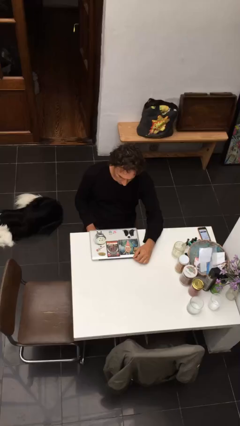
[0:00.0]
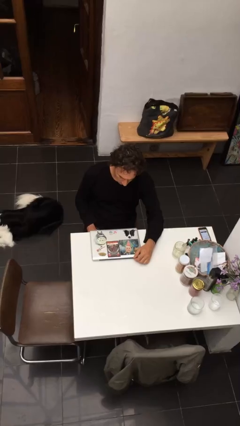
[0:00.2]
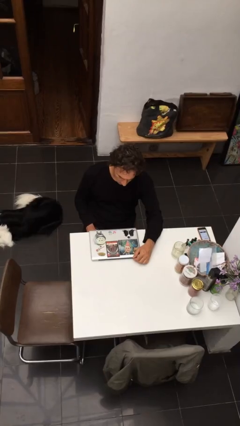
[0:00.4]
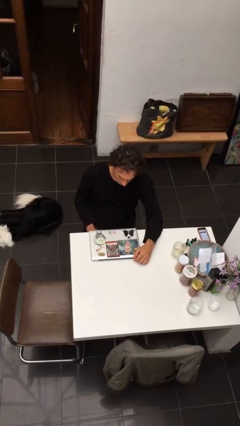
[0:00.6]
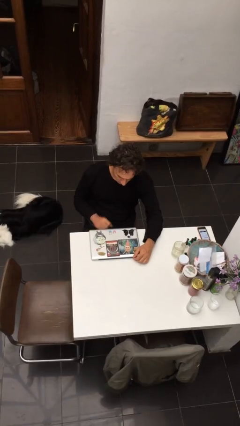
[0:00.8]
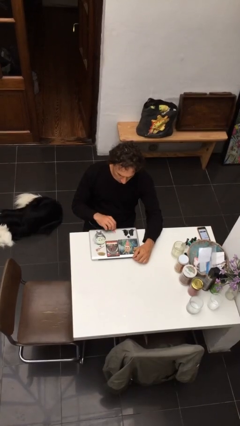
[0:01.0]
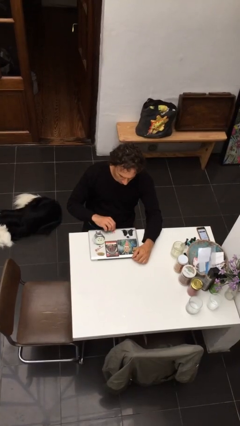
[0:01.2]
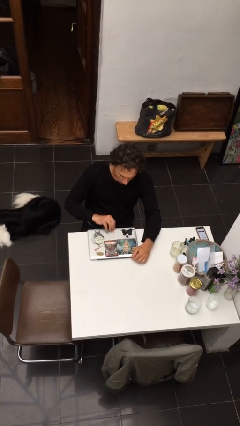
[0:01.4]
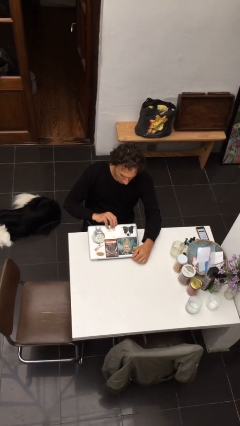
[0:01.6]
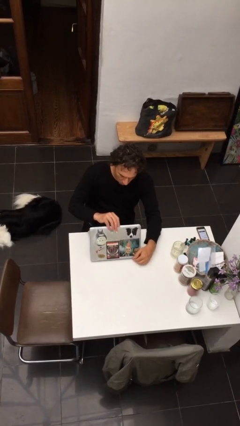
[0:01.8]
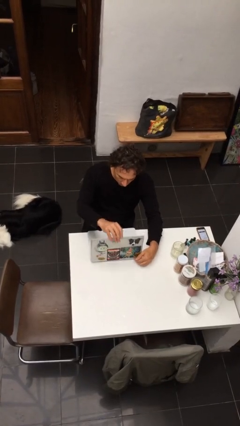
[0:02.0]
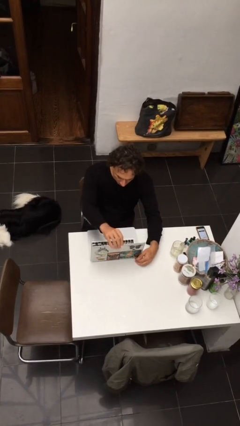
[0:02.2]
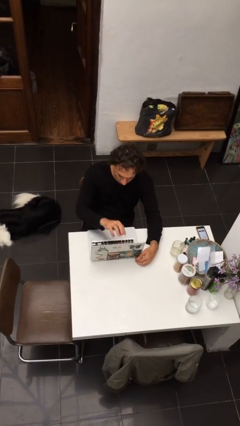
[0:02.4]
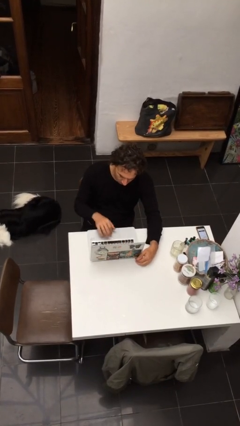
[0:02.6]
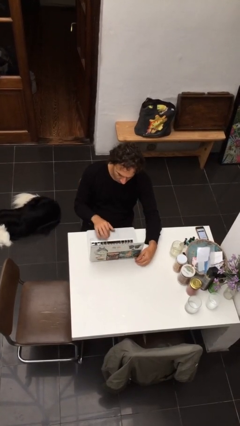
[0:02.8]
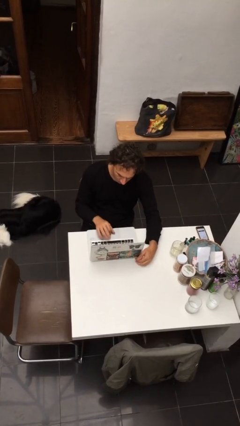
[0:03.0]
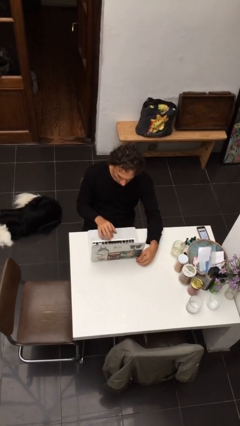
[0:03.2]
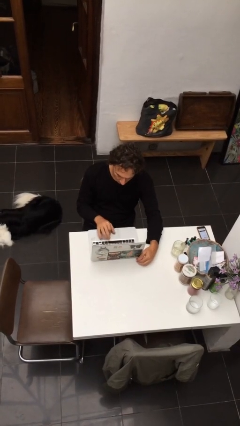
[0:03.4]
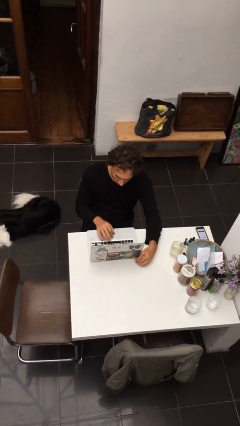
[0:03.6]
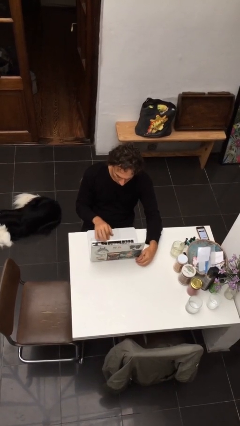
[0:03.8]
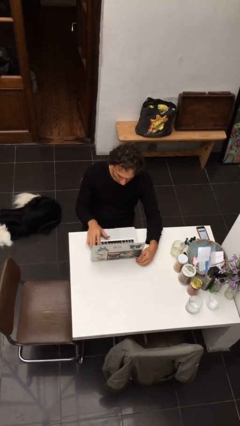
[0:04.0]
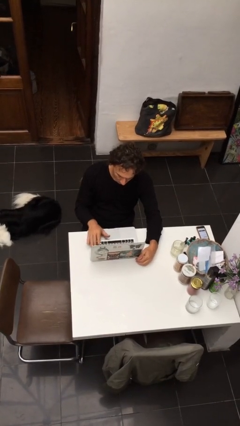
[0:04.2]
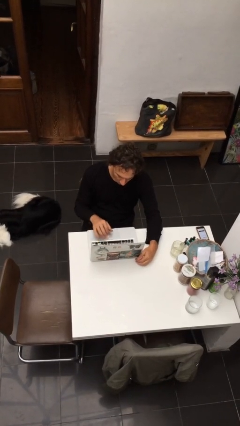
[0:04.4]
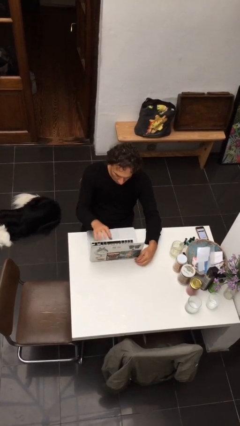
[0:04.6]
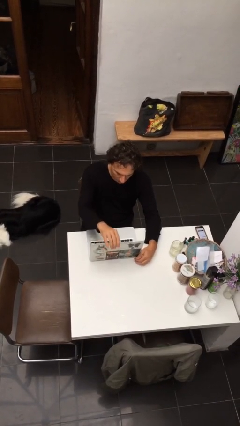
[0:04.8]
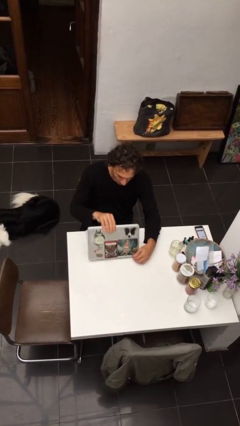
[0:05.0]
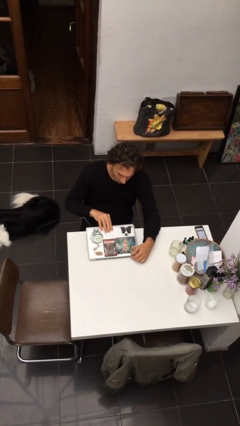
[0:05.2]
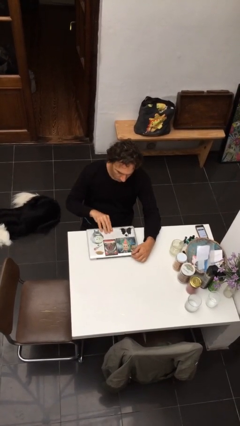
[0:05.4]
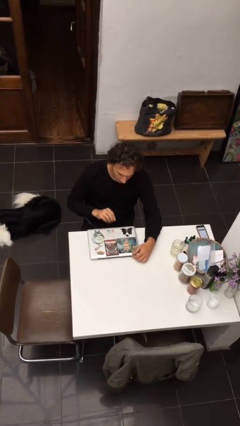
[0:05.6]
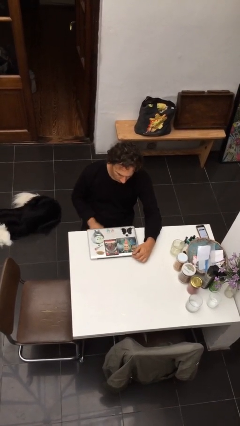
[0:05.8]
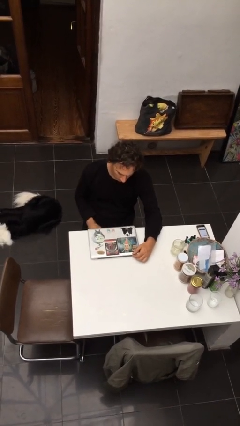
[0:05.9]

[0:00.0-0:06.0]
person interacts with laptop

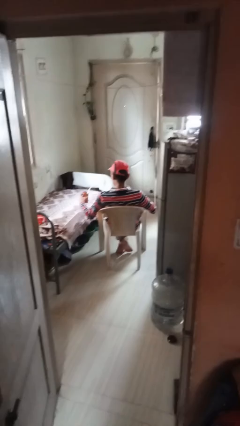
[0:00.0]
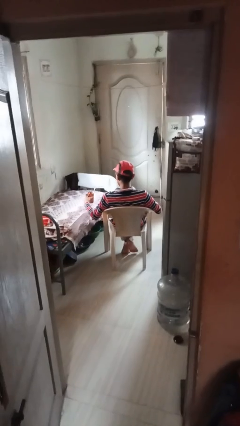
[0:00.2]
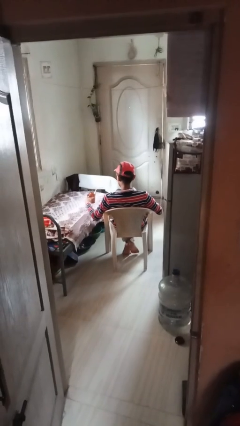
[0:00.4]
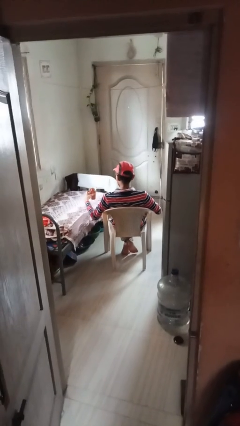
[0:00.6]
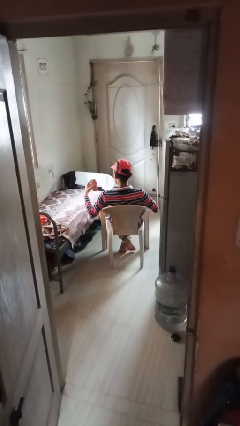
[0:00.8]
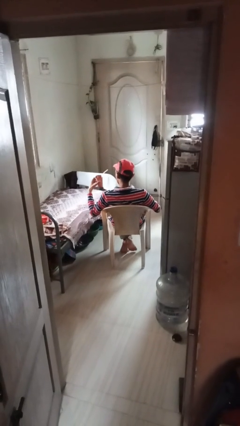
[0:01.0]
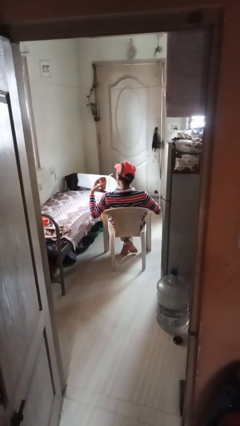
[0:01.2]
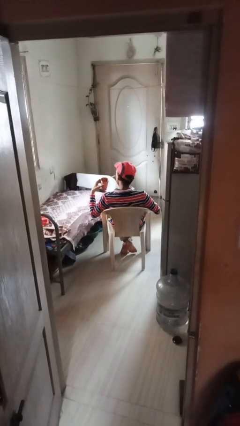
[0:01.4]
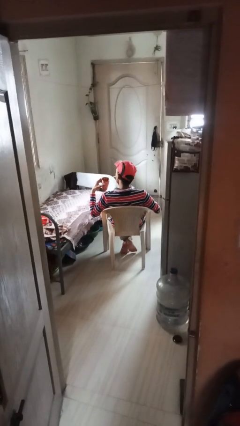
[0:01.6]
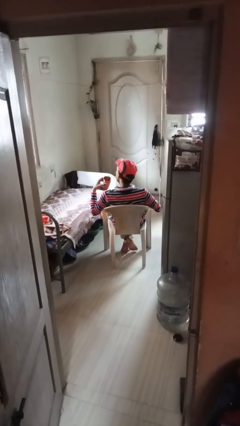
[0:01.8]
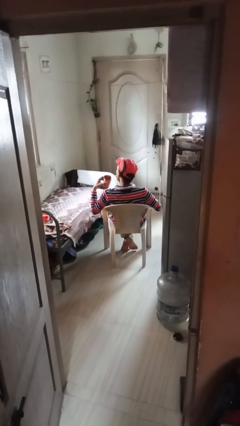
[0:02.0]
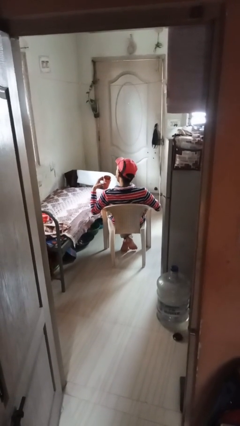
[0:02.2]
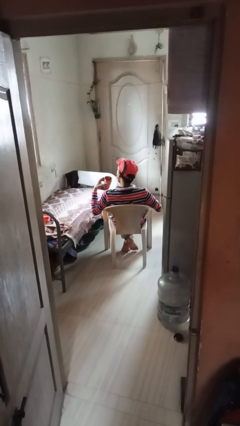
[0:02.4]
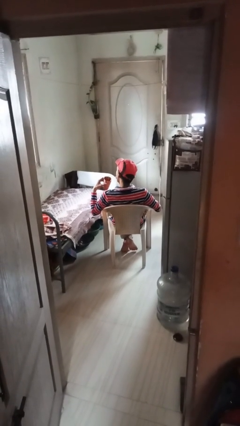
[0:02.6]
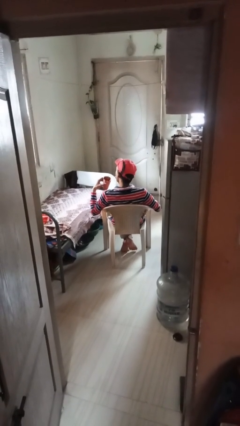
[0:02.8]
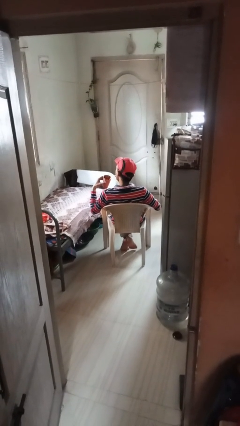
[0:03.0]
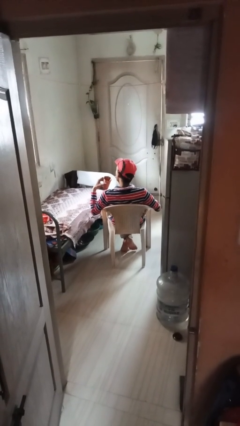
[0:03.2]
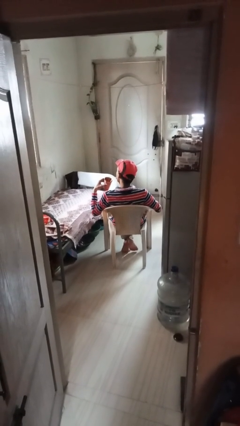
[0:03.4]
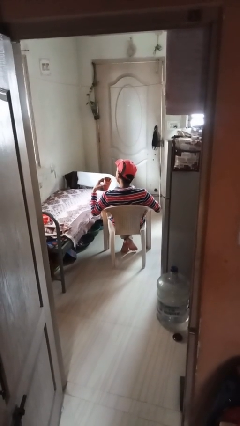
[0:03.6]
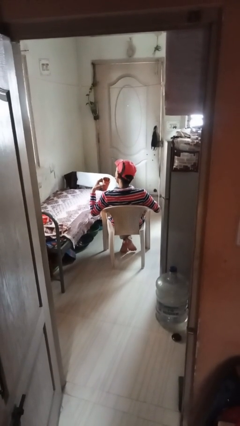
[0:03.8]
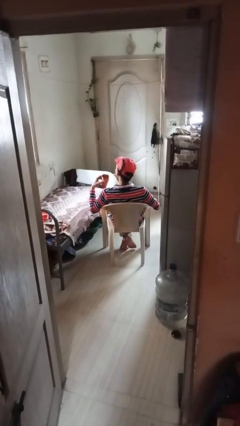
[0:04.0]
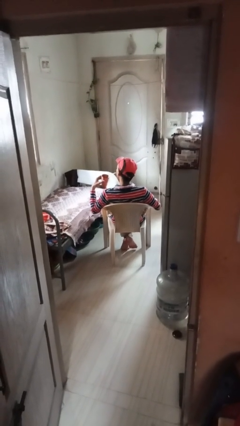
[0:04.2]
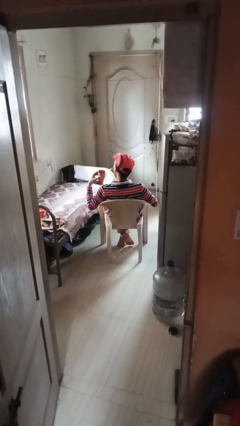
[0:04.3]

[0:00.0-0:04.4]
person drinks from straw

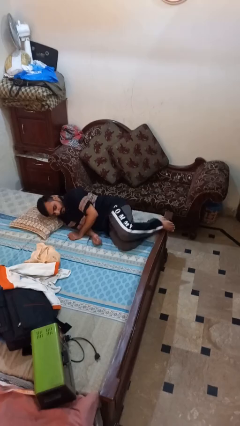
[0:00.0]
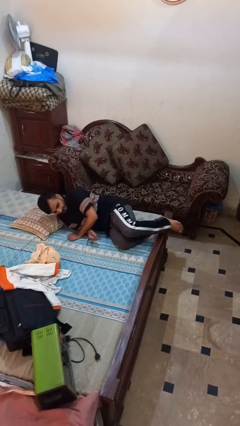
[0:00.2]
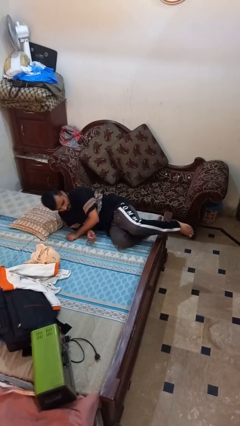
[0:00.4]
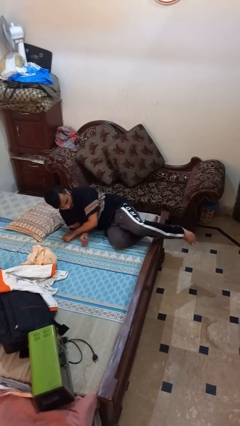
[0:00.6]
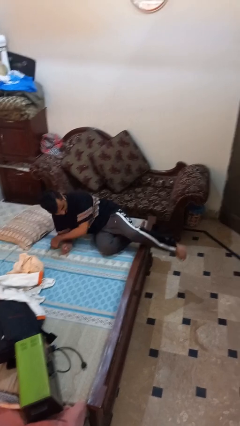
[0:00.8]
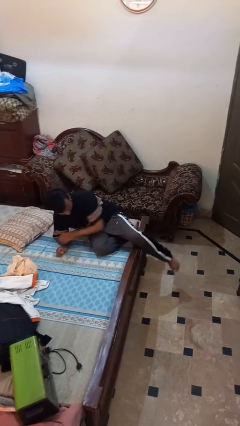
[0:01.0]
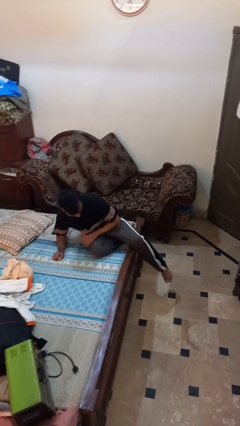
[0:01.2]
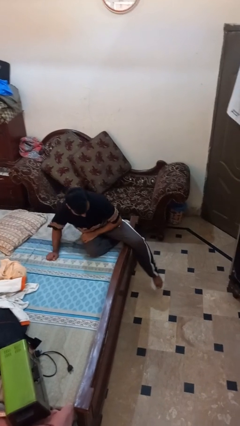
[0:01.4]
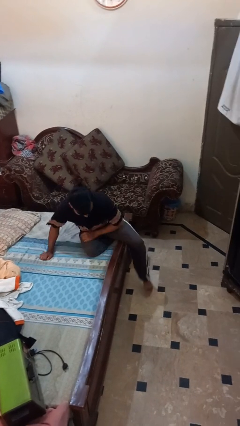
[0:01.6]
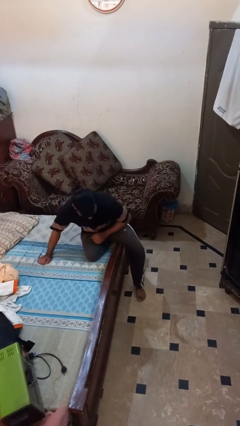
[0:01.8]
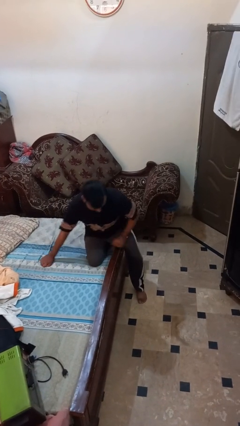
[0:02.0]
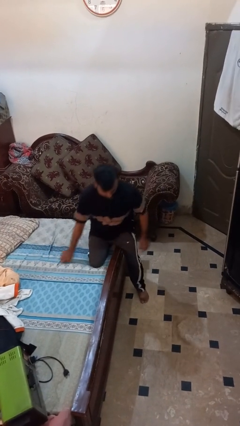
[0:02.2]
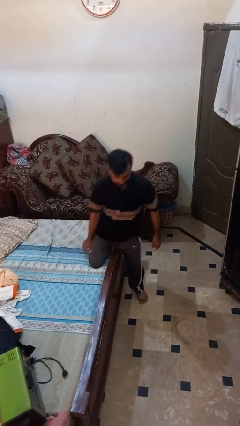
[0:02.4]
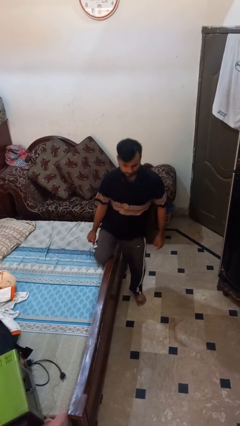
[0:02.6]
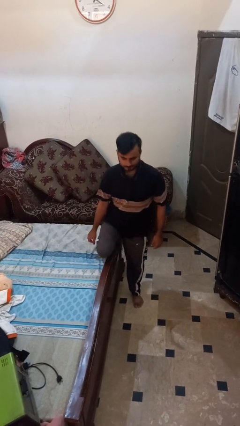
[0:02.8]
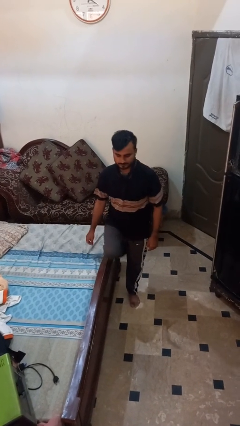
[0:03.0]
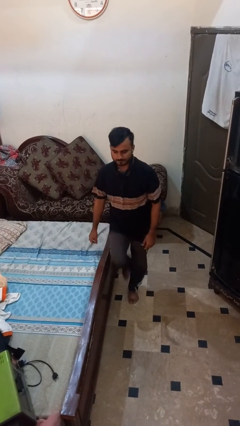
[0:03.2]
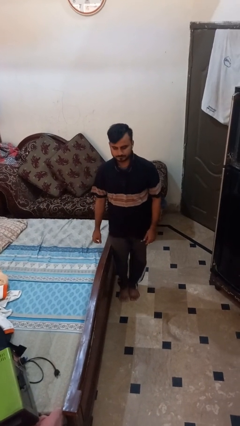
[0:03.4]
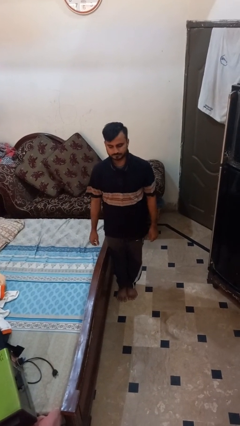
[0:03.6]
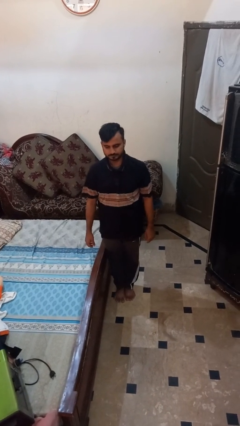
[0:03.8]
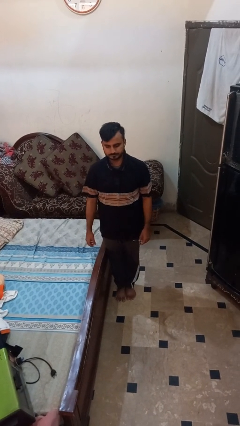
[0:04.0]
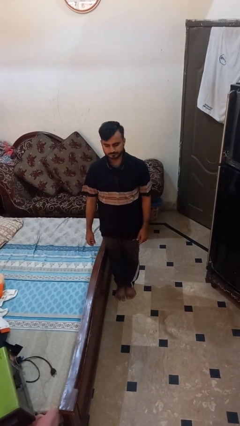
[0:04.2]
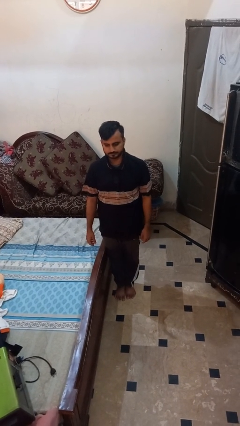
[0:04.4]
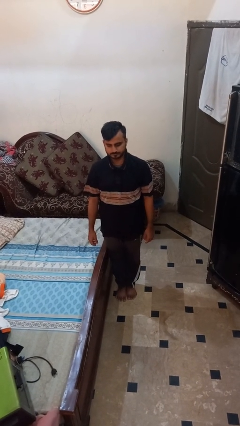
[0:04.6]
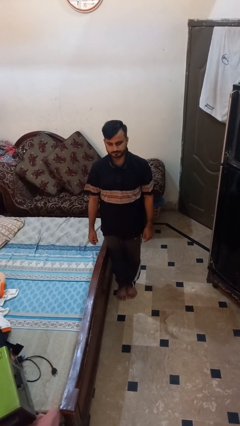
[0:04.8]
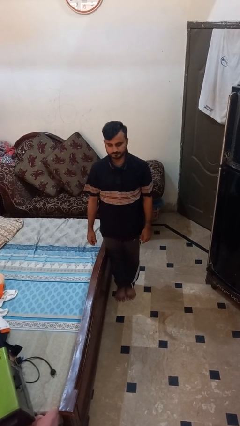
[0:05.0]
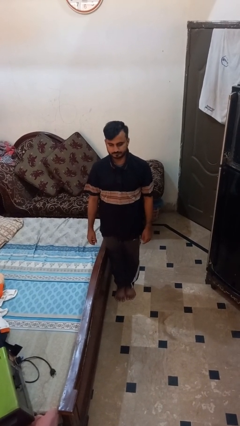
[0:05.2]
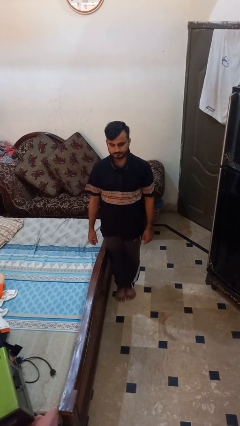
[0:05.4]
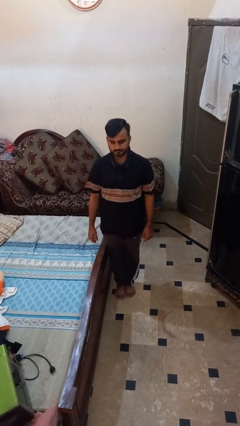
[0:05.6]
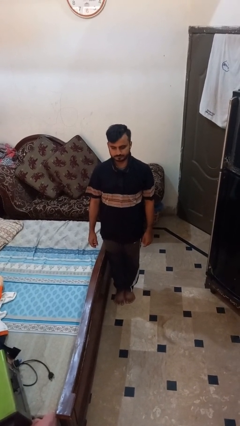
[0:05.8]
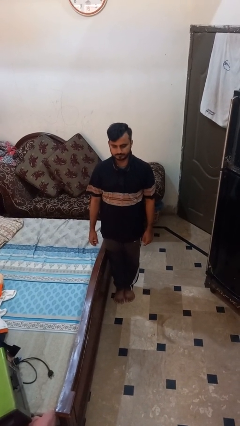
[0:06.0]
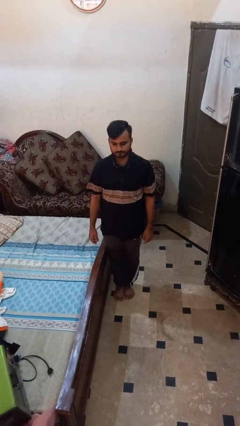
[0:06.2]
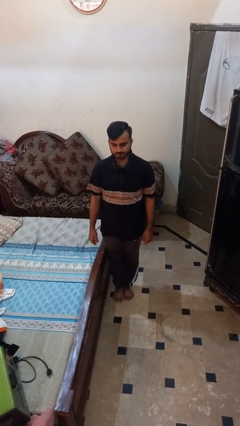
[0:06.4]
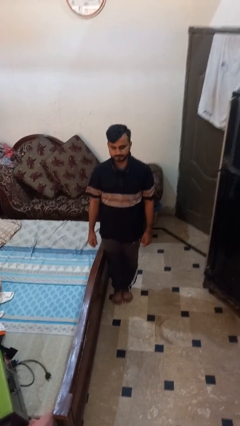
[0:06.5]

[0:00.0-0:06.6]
person stands up

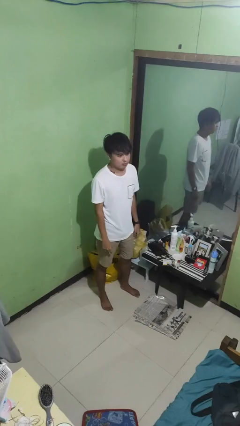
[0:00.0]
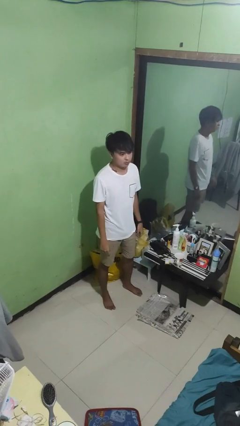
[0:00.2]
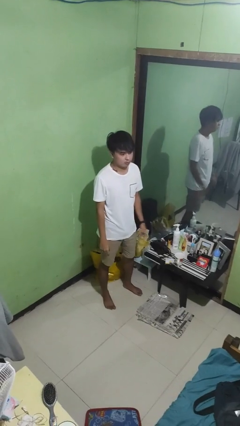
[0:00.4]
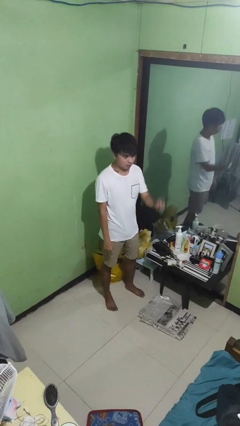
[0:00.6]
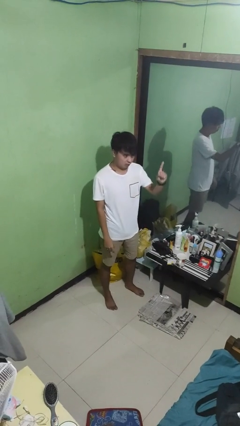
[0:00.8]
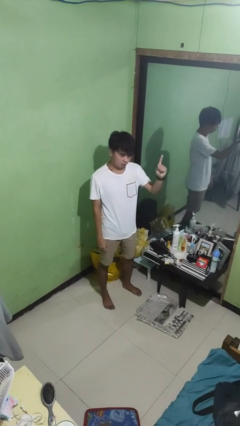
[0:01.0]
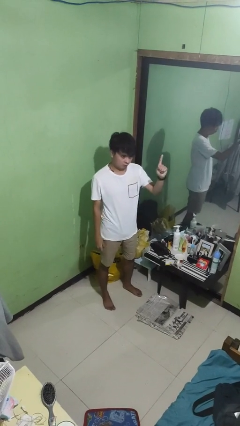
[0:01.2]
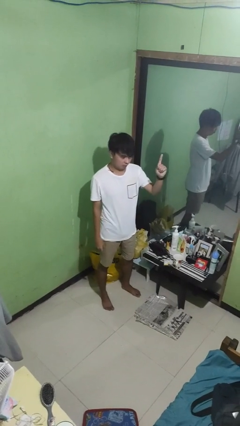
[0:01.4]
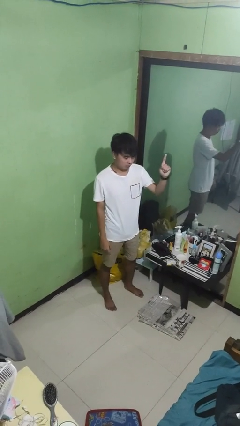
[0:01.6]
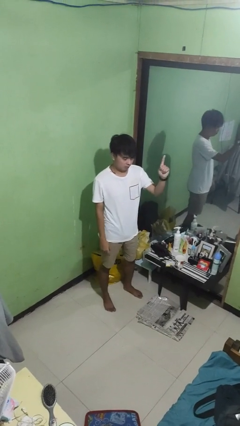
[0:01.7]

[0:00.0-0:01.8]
person gestures number one
